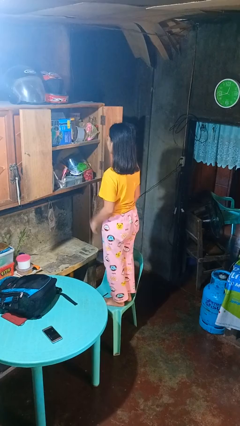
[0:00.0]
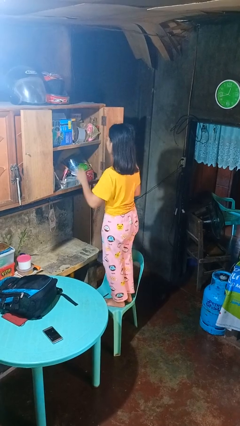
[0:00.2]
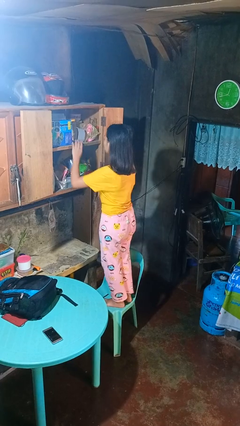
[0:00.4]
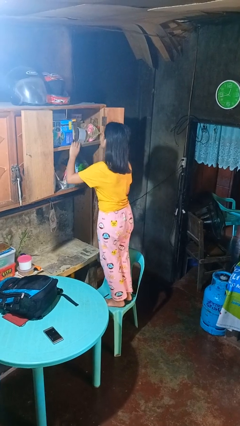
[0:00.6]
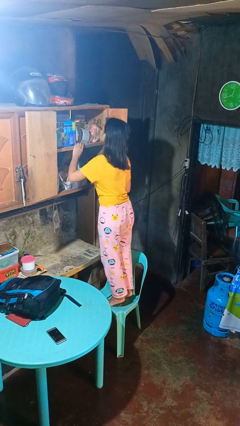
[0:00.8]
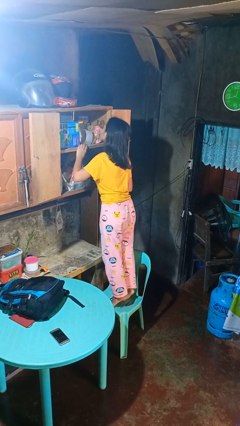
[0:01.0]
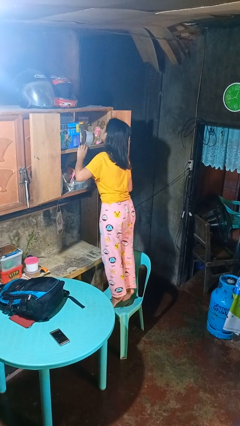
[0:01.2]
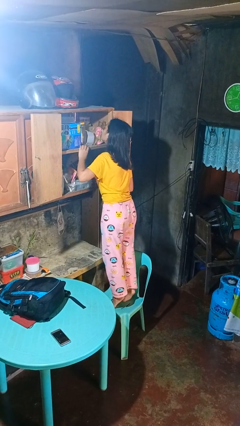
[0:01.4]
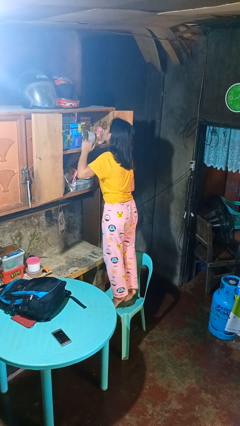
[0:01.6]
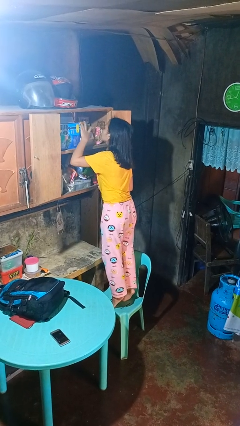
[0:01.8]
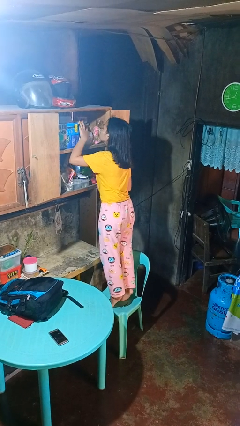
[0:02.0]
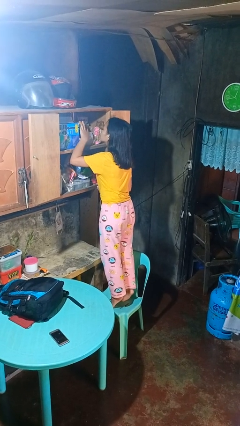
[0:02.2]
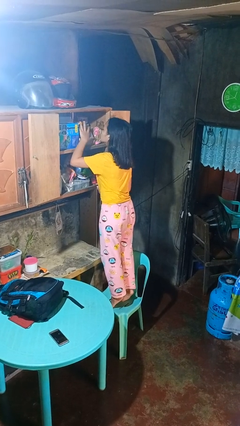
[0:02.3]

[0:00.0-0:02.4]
person searches in cabinet

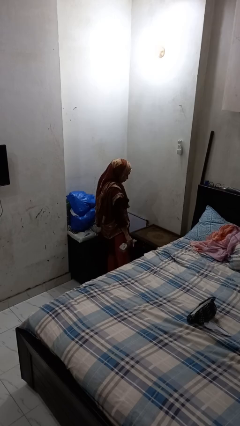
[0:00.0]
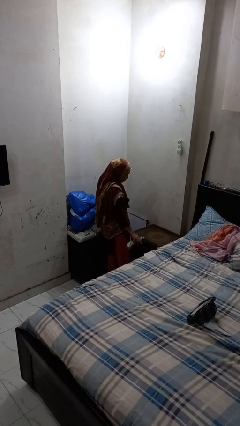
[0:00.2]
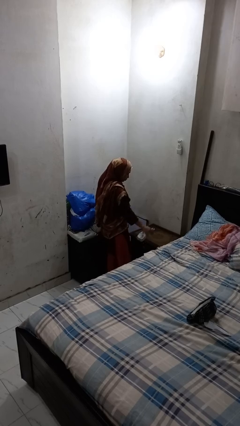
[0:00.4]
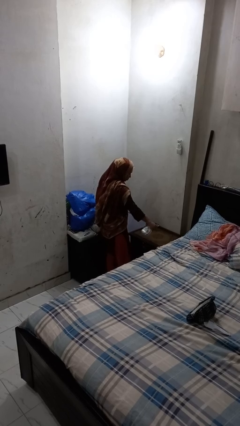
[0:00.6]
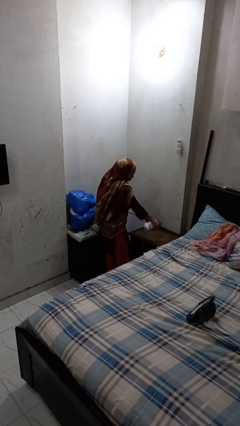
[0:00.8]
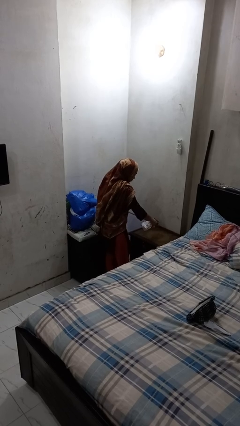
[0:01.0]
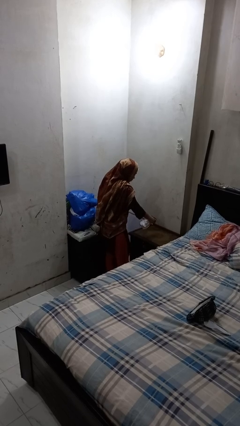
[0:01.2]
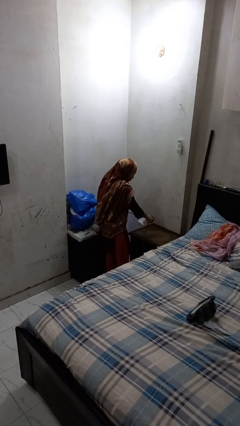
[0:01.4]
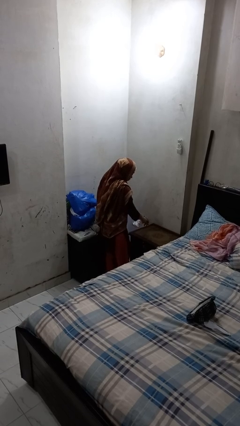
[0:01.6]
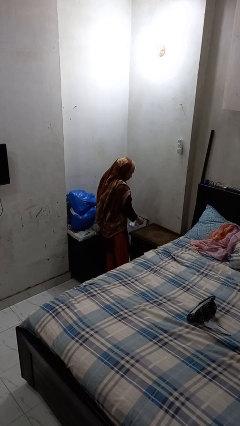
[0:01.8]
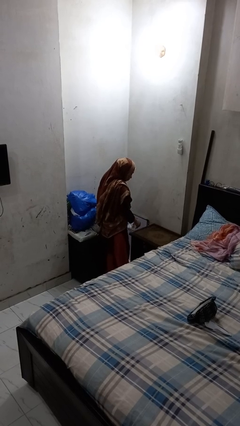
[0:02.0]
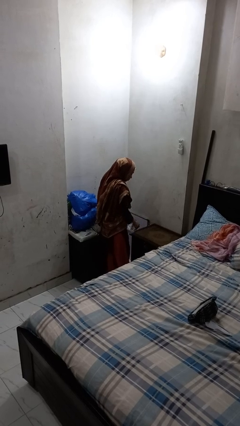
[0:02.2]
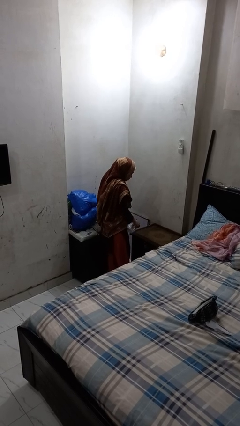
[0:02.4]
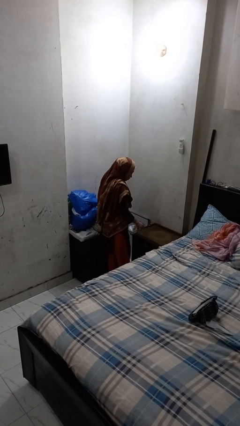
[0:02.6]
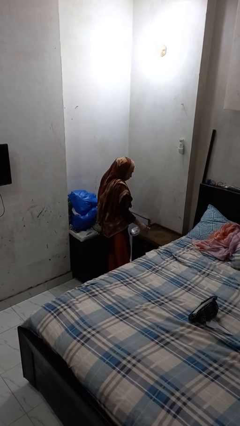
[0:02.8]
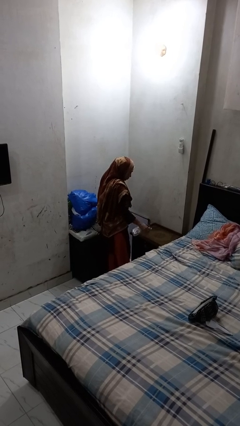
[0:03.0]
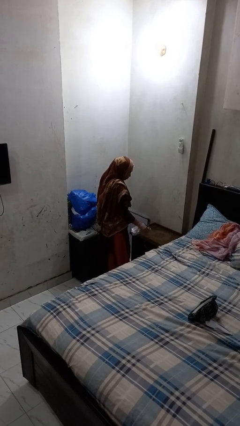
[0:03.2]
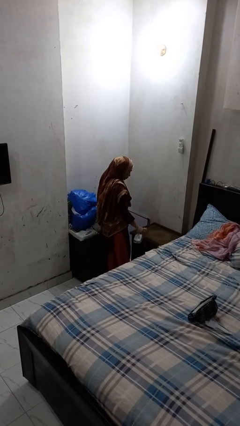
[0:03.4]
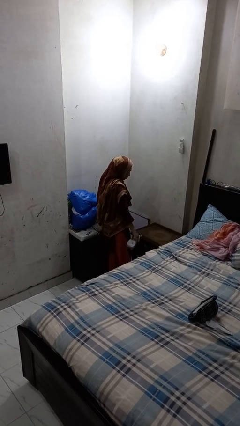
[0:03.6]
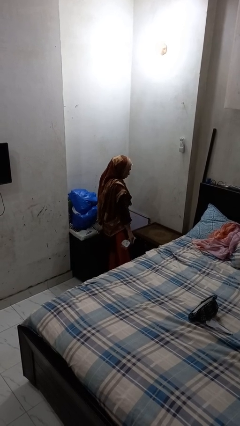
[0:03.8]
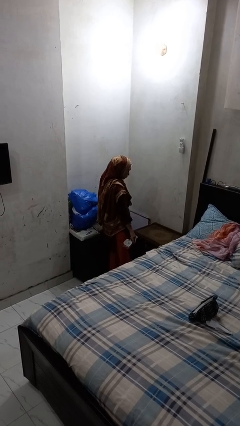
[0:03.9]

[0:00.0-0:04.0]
person sprays from bottle

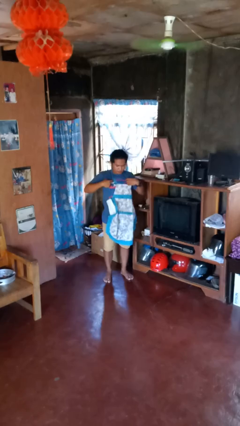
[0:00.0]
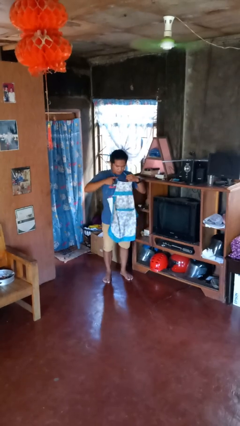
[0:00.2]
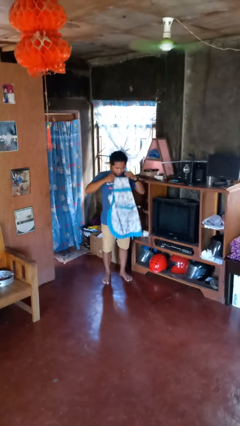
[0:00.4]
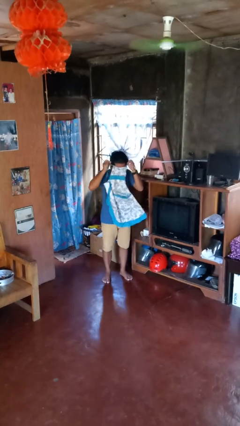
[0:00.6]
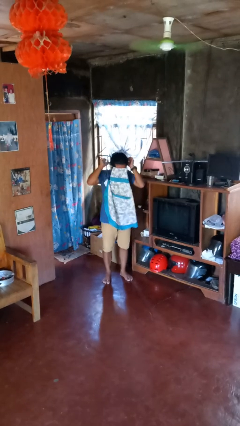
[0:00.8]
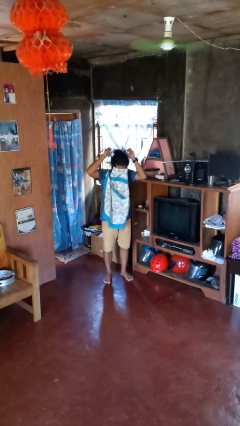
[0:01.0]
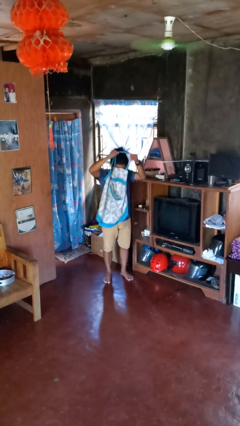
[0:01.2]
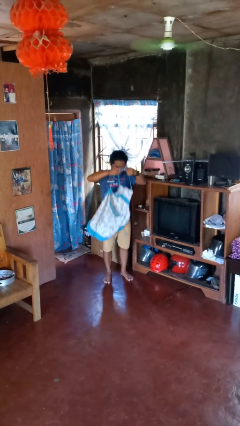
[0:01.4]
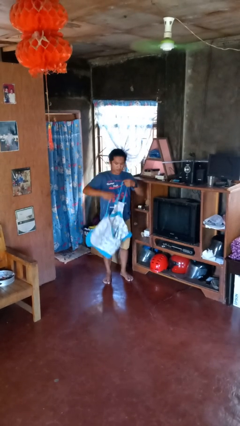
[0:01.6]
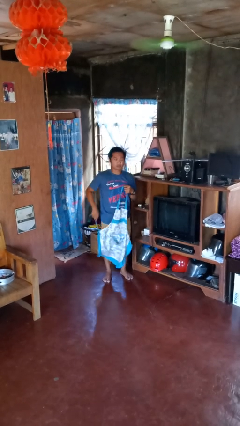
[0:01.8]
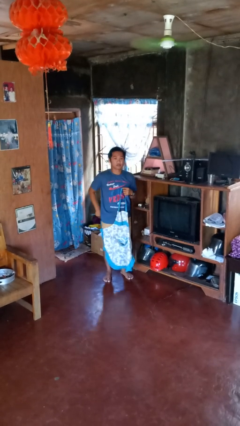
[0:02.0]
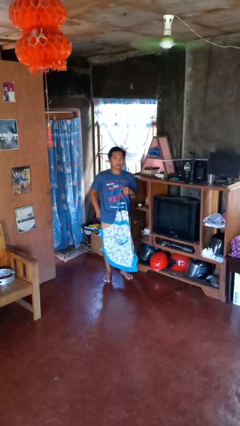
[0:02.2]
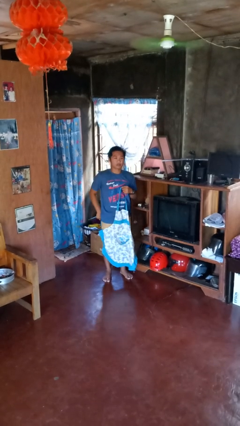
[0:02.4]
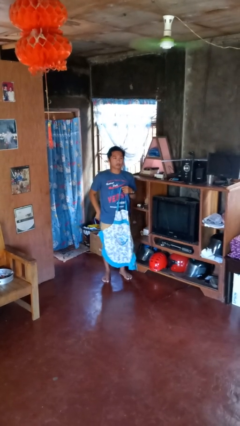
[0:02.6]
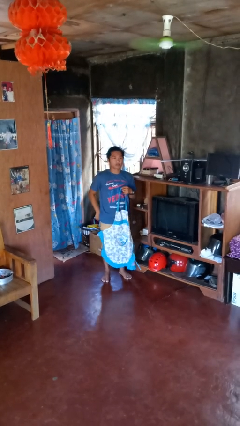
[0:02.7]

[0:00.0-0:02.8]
person takes off apron

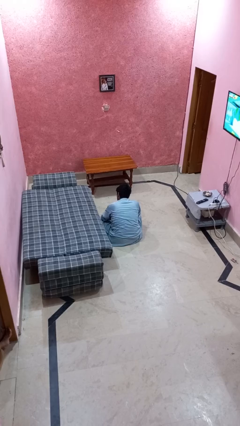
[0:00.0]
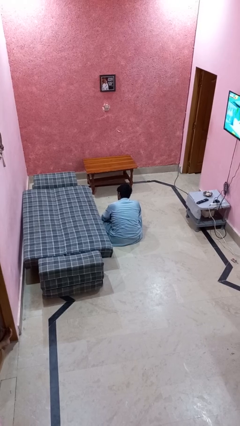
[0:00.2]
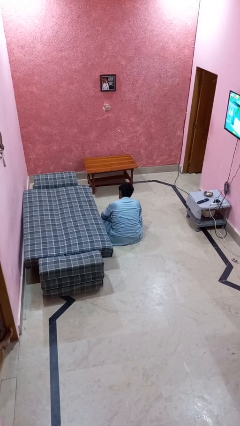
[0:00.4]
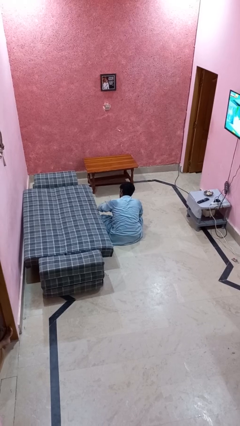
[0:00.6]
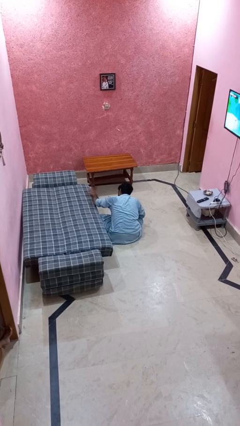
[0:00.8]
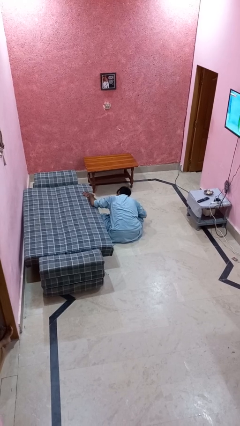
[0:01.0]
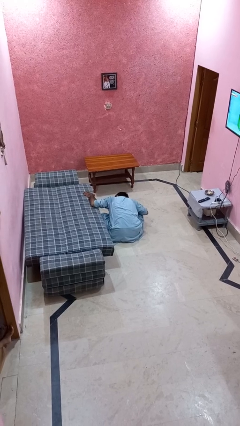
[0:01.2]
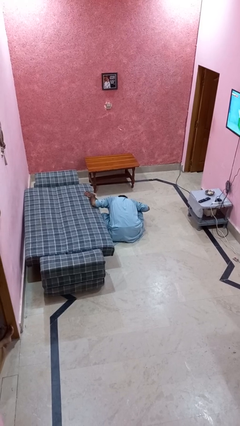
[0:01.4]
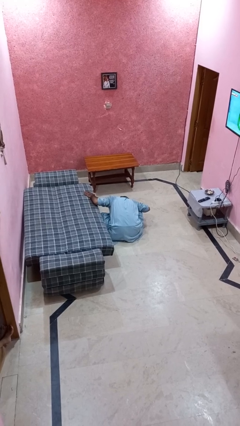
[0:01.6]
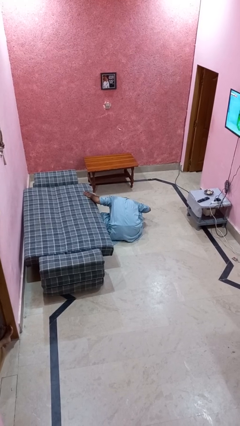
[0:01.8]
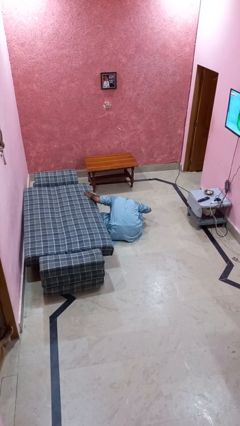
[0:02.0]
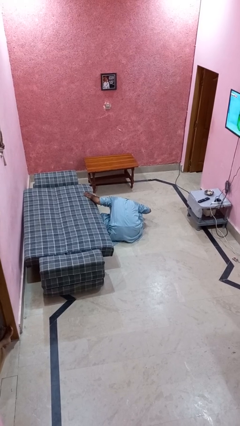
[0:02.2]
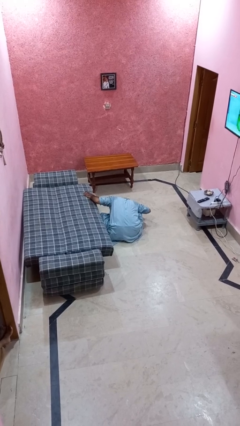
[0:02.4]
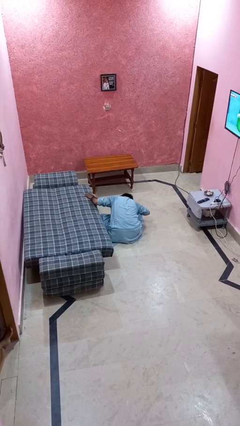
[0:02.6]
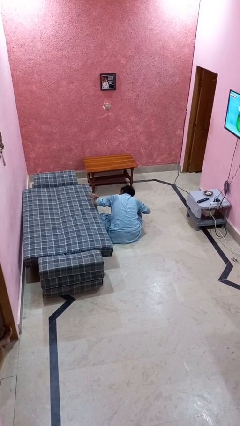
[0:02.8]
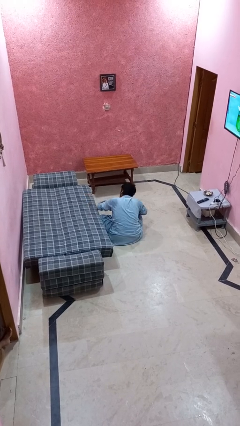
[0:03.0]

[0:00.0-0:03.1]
person searches under bed

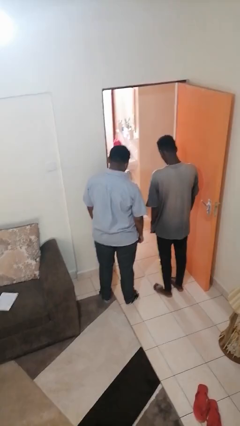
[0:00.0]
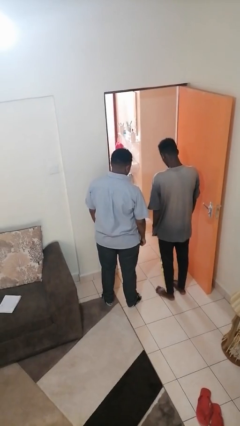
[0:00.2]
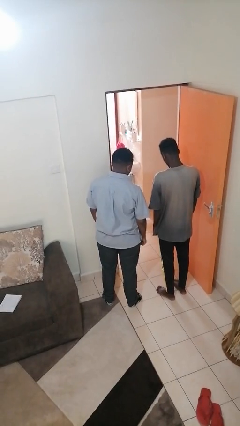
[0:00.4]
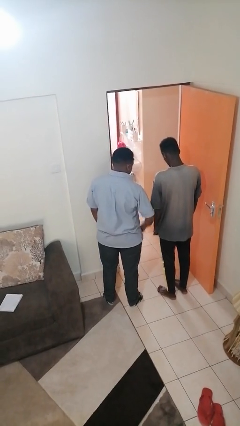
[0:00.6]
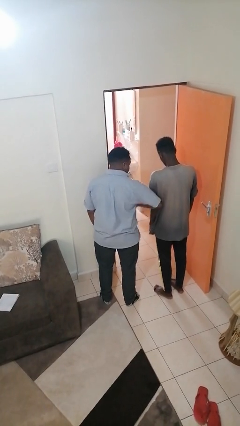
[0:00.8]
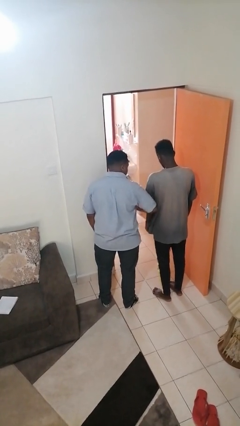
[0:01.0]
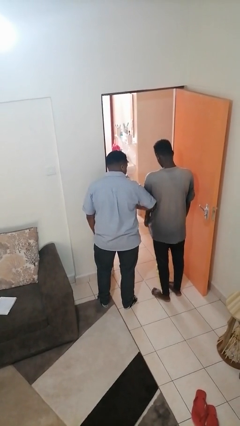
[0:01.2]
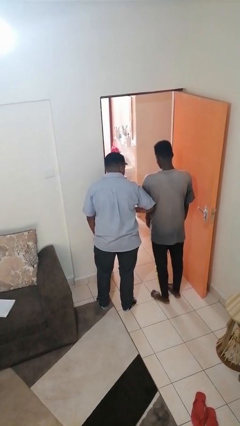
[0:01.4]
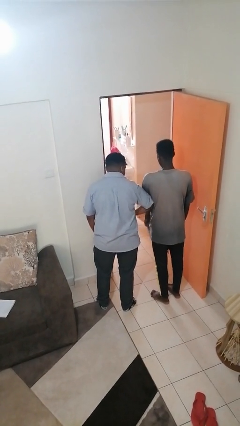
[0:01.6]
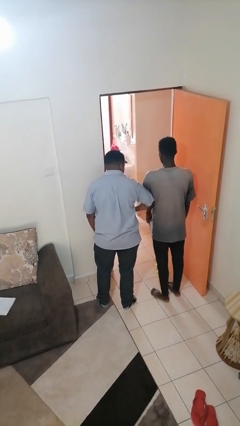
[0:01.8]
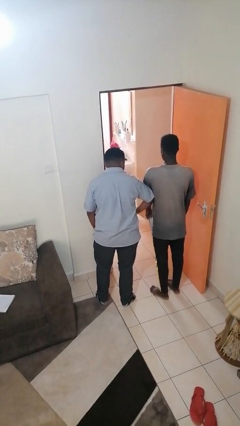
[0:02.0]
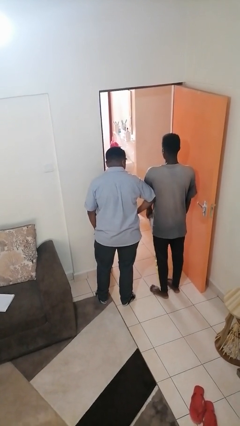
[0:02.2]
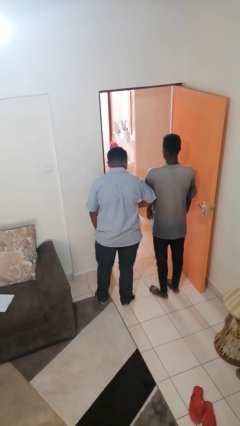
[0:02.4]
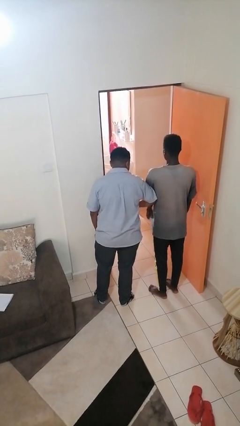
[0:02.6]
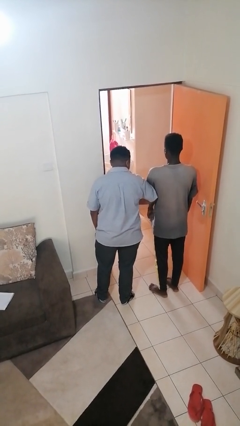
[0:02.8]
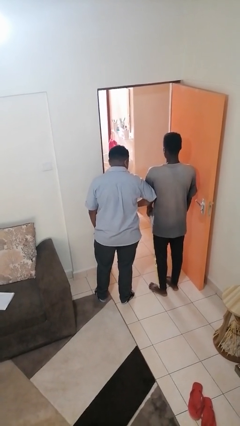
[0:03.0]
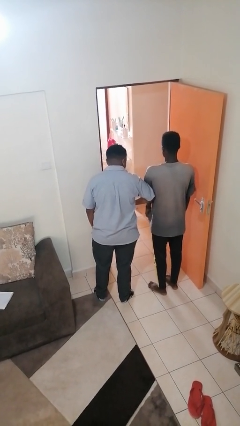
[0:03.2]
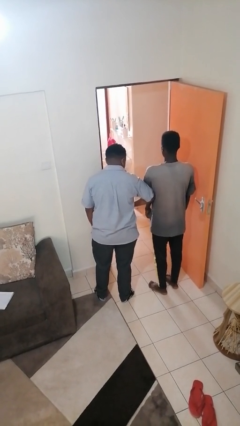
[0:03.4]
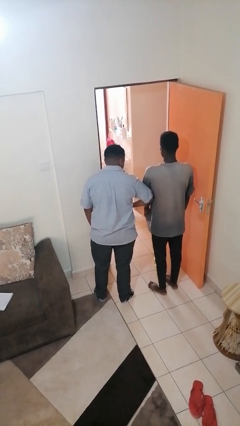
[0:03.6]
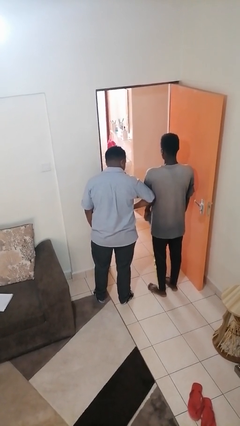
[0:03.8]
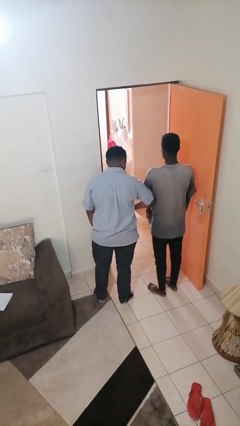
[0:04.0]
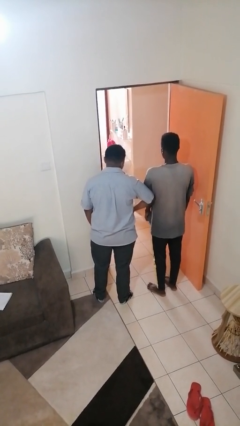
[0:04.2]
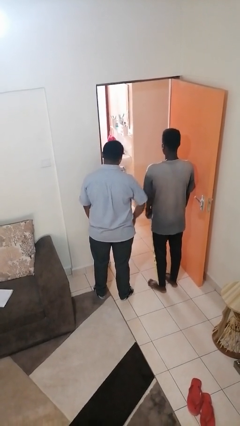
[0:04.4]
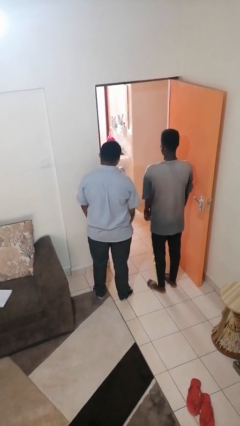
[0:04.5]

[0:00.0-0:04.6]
person nudges person with elbow

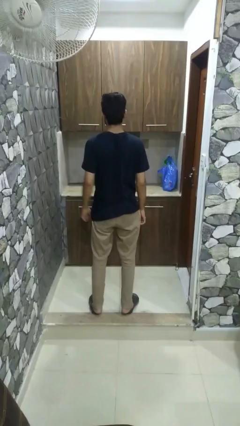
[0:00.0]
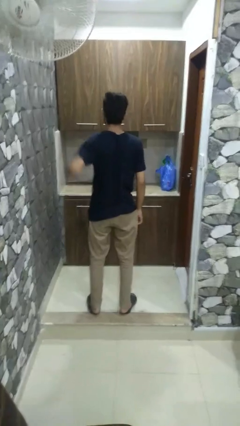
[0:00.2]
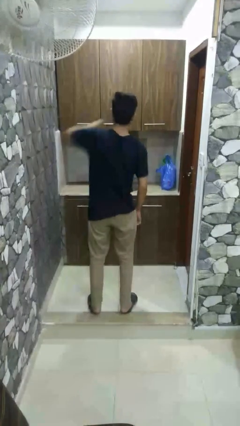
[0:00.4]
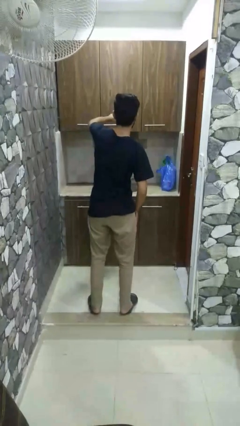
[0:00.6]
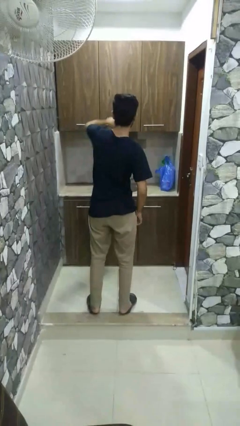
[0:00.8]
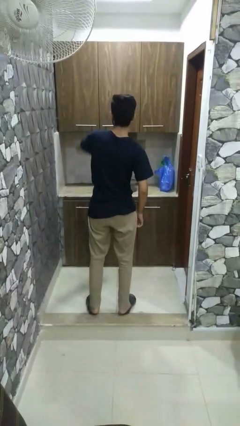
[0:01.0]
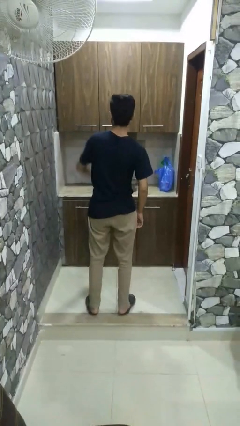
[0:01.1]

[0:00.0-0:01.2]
person punches
